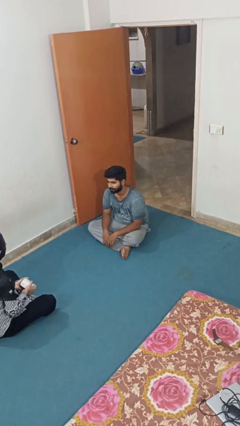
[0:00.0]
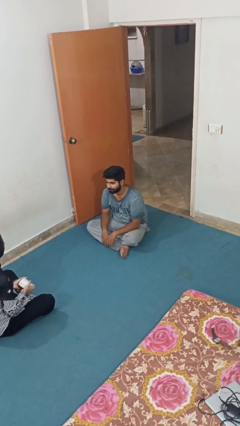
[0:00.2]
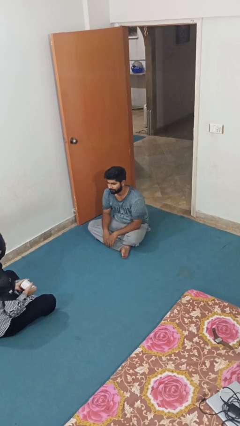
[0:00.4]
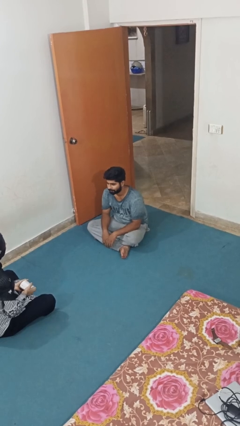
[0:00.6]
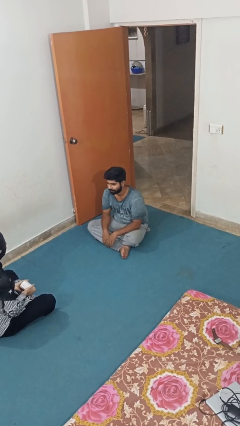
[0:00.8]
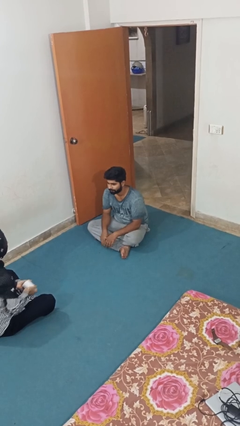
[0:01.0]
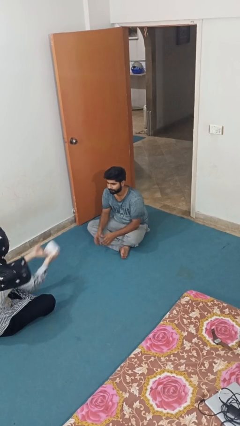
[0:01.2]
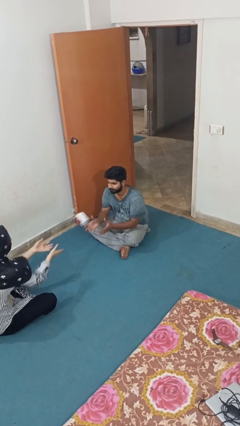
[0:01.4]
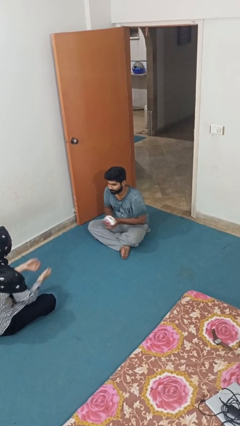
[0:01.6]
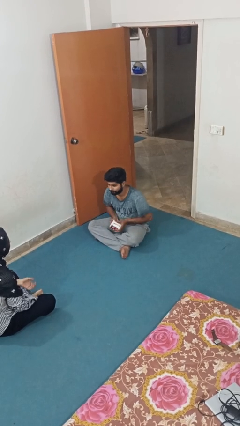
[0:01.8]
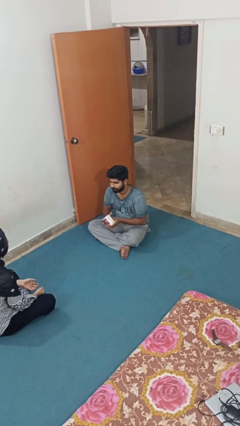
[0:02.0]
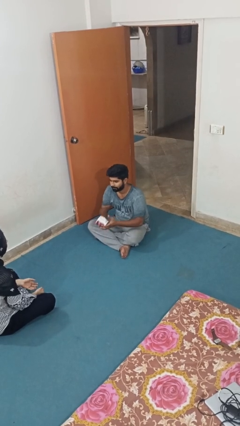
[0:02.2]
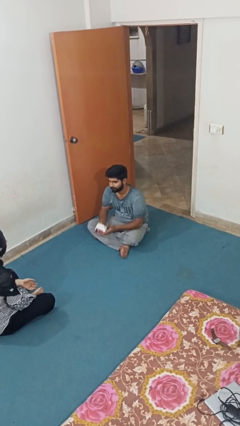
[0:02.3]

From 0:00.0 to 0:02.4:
person catches object from person

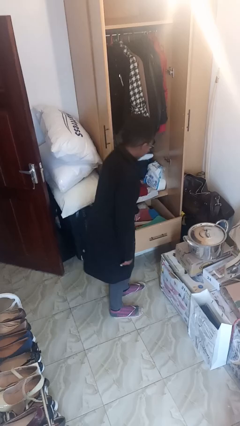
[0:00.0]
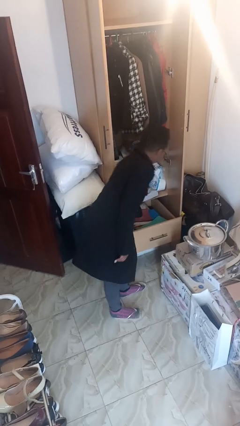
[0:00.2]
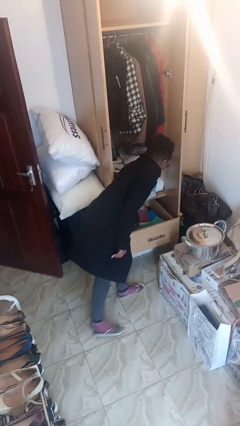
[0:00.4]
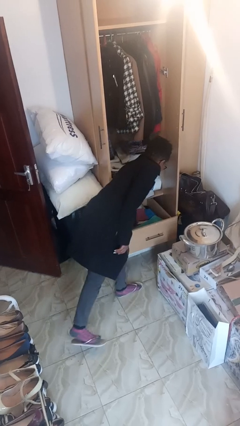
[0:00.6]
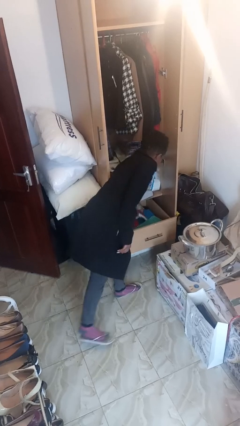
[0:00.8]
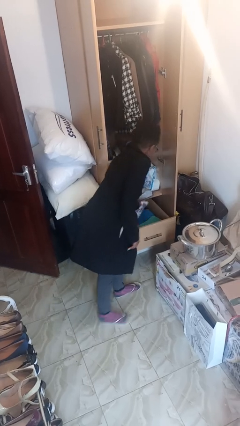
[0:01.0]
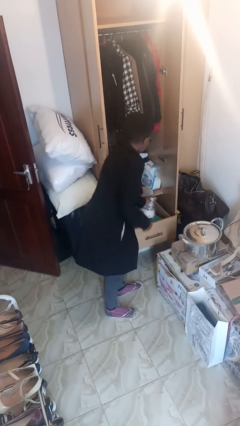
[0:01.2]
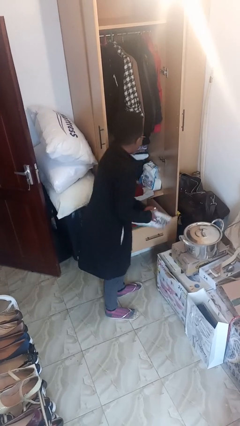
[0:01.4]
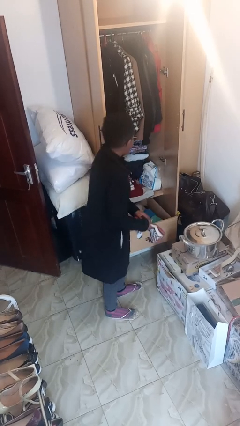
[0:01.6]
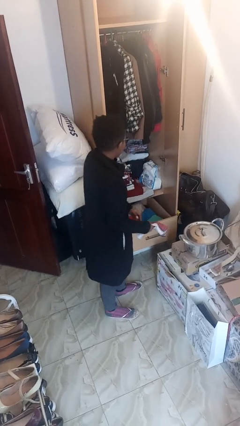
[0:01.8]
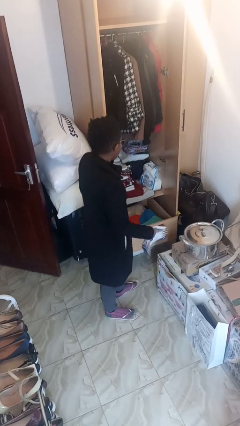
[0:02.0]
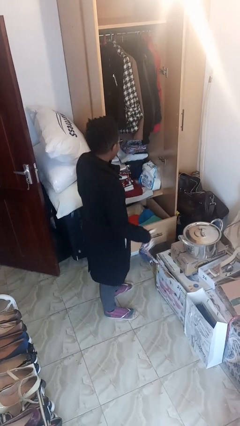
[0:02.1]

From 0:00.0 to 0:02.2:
person takes clothes from dresser

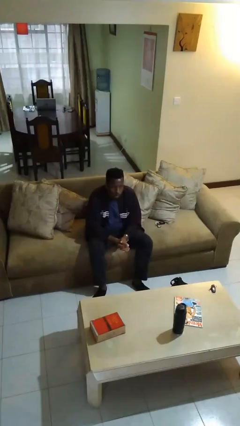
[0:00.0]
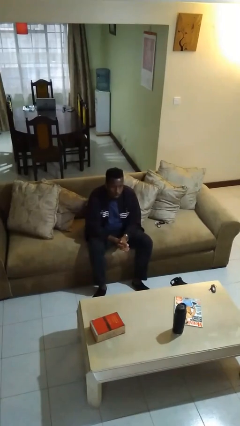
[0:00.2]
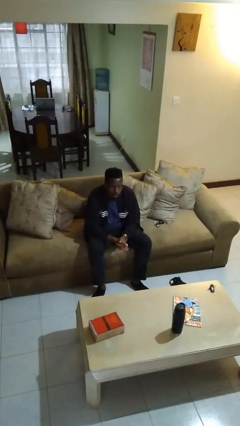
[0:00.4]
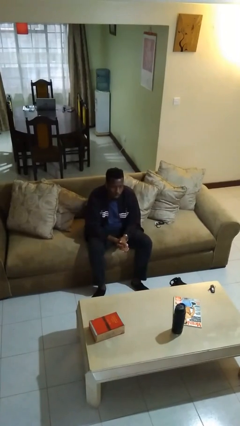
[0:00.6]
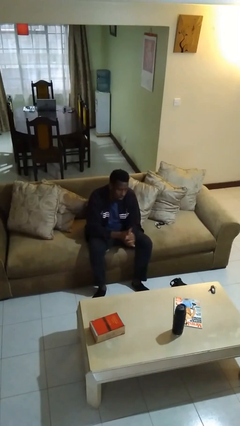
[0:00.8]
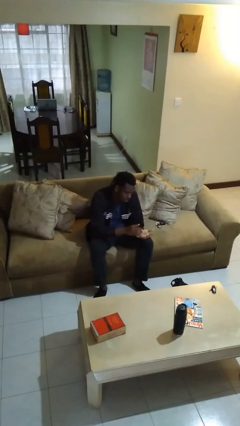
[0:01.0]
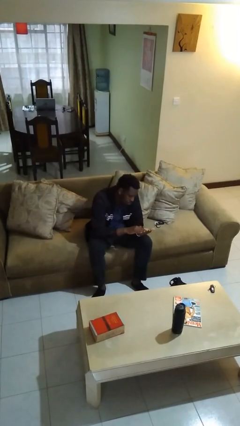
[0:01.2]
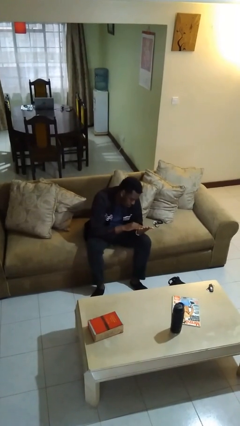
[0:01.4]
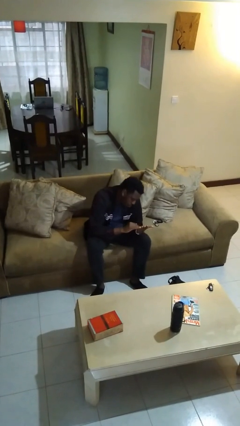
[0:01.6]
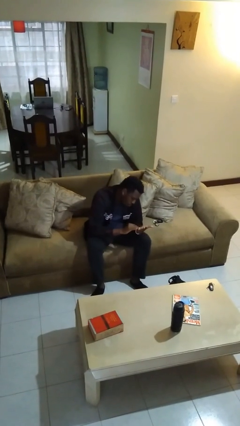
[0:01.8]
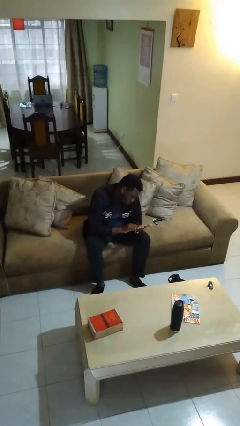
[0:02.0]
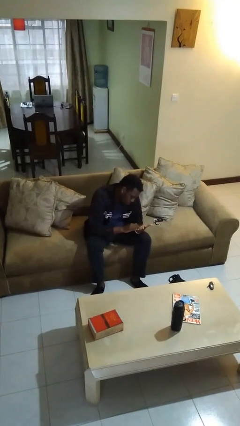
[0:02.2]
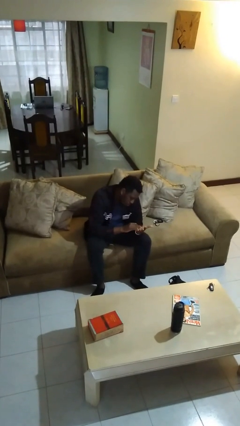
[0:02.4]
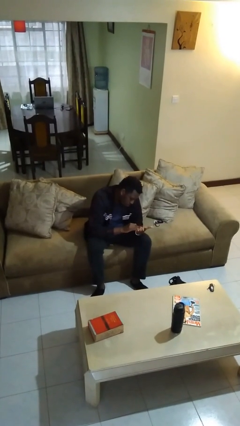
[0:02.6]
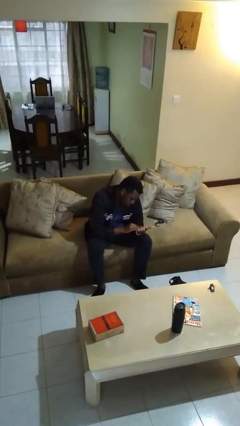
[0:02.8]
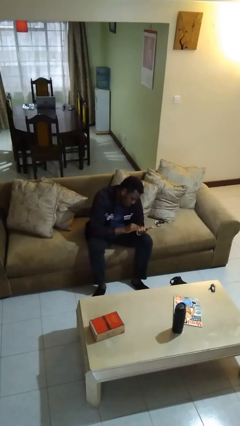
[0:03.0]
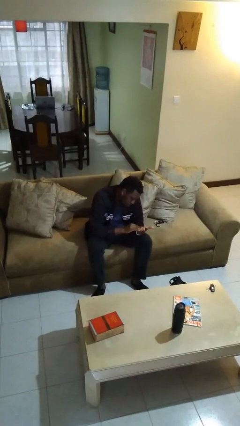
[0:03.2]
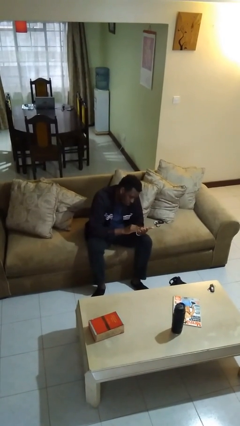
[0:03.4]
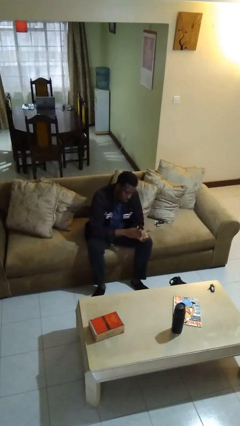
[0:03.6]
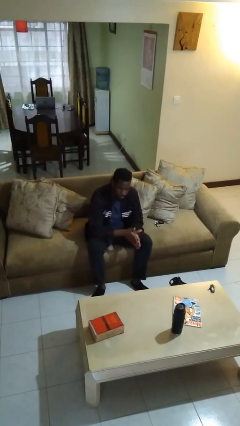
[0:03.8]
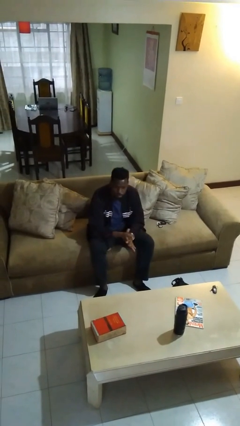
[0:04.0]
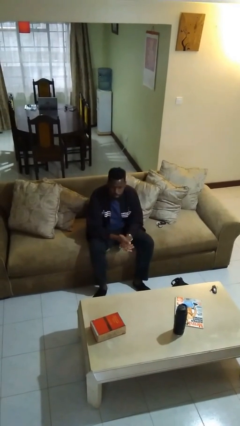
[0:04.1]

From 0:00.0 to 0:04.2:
person looks at hands in lap

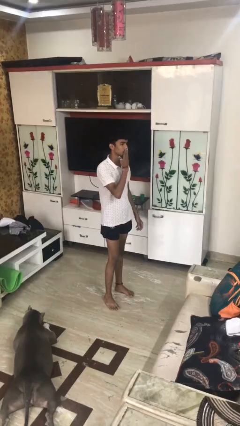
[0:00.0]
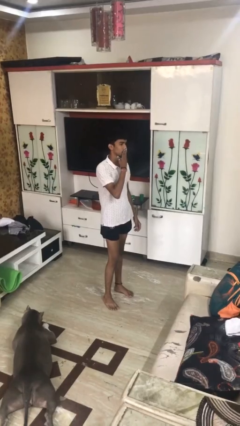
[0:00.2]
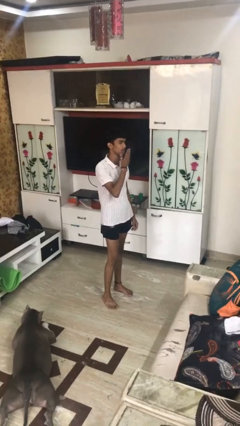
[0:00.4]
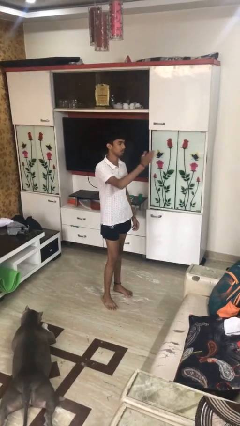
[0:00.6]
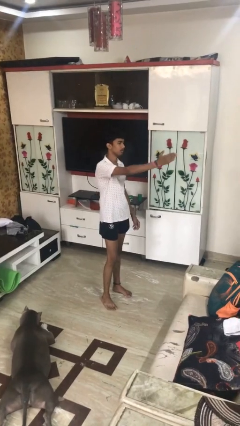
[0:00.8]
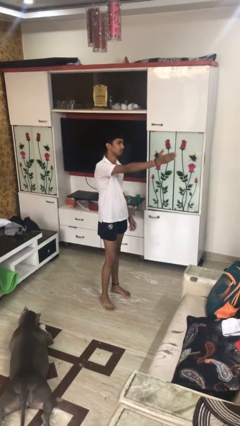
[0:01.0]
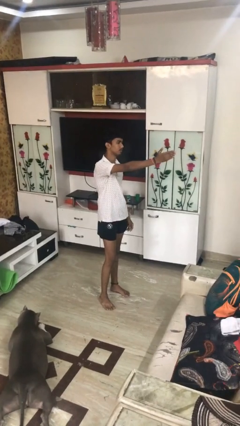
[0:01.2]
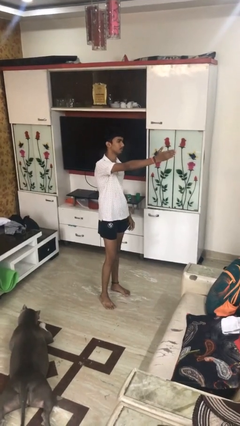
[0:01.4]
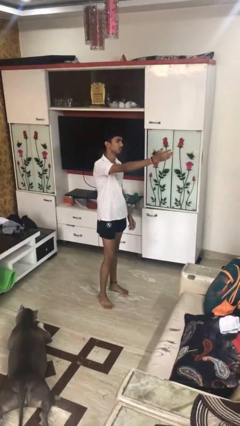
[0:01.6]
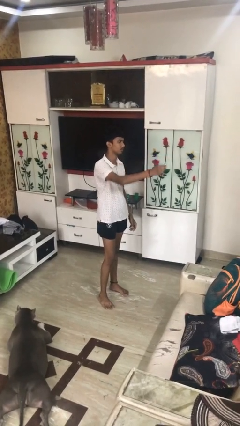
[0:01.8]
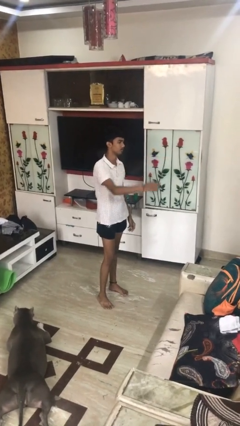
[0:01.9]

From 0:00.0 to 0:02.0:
person gestures blow kiss

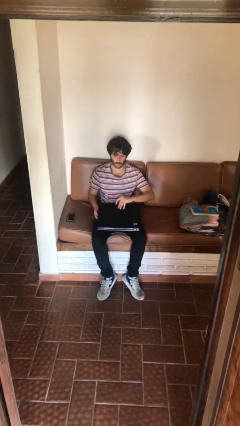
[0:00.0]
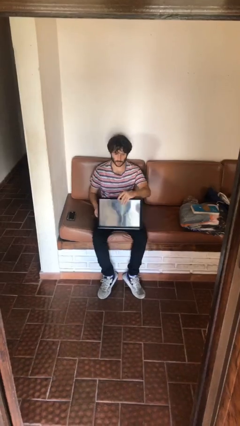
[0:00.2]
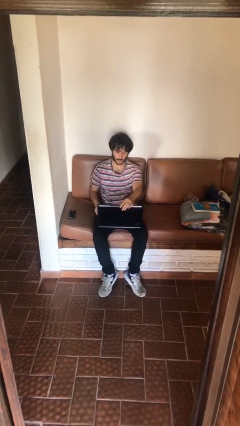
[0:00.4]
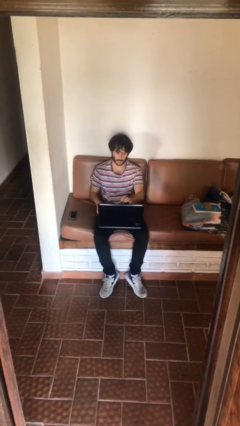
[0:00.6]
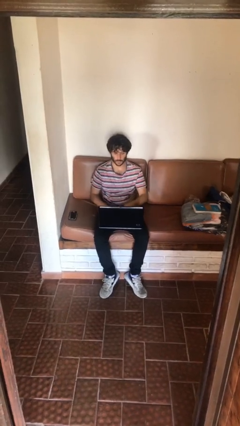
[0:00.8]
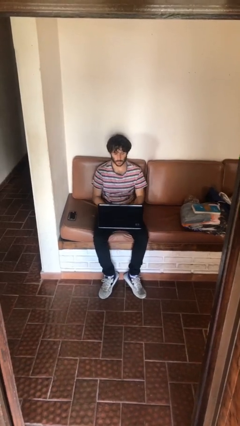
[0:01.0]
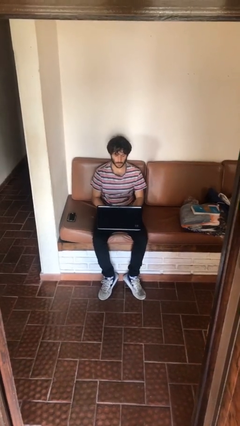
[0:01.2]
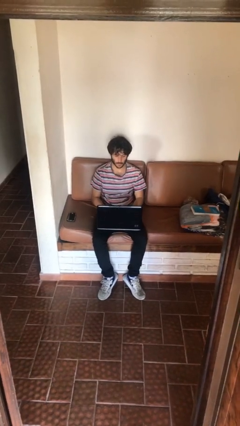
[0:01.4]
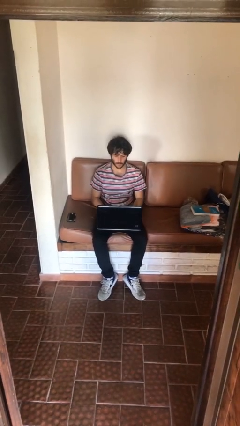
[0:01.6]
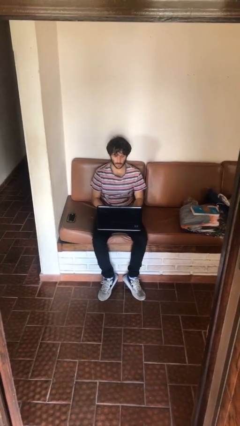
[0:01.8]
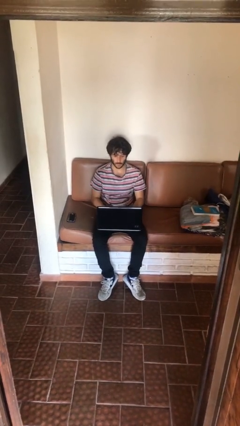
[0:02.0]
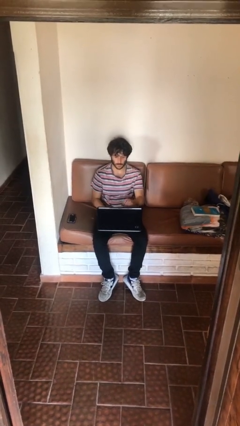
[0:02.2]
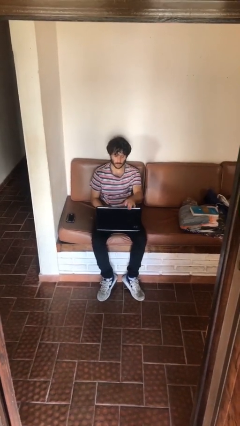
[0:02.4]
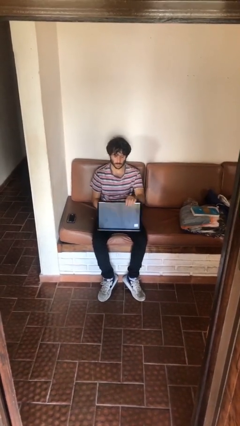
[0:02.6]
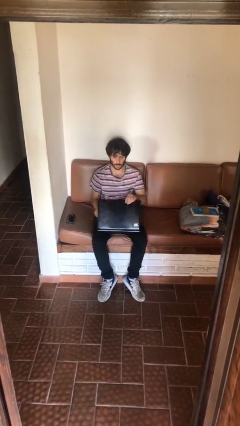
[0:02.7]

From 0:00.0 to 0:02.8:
person interacts with laptop

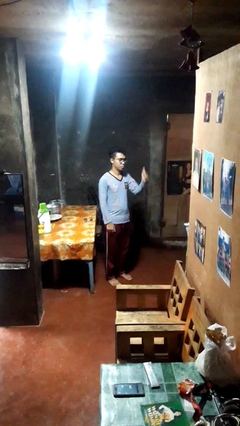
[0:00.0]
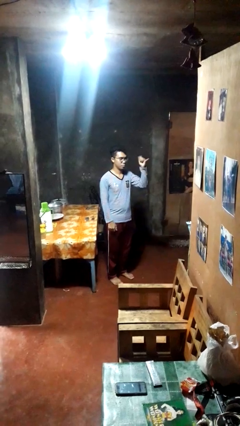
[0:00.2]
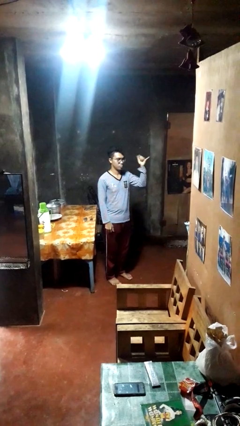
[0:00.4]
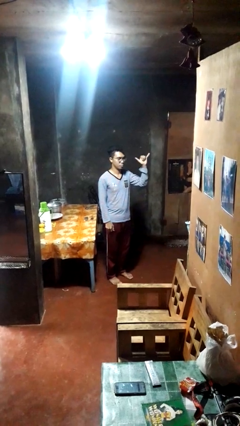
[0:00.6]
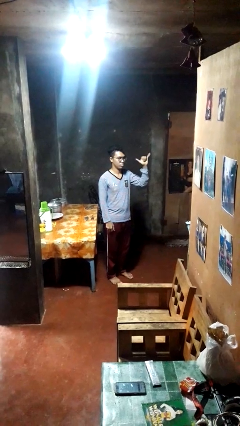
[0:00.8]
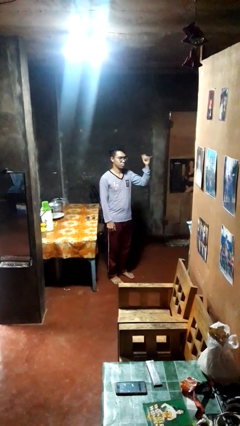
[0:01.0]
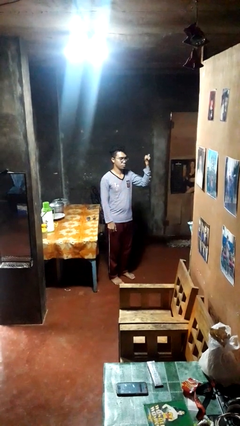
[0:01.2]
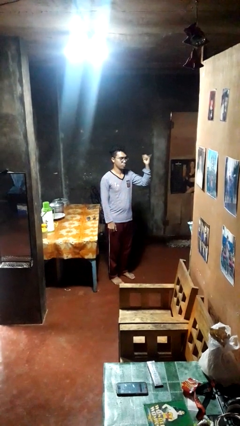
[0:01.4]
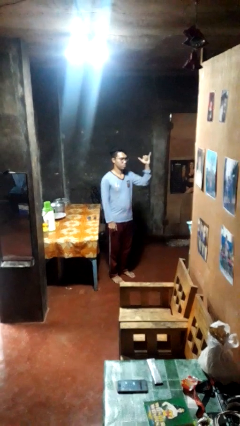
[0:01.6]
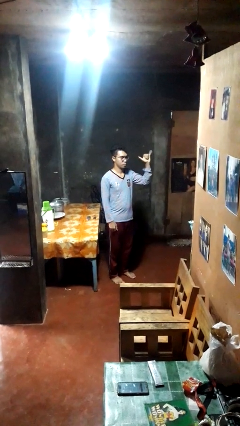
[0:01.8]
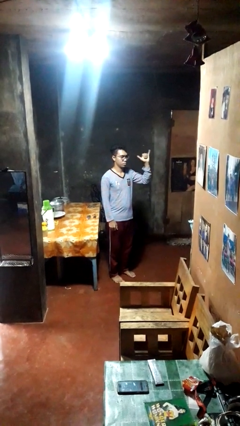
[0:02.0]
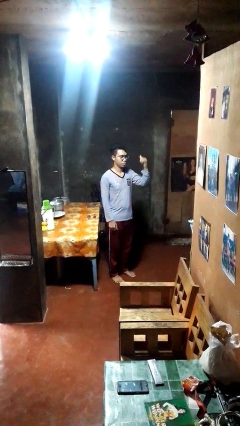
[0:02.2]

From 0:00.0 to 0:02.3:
person gestures hang loose

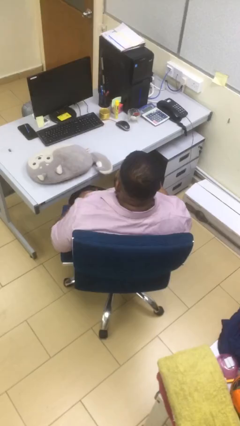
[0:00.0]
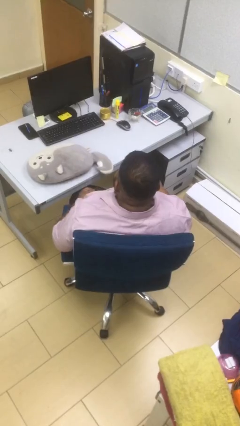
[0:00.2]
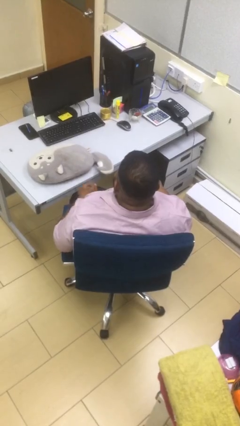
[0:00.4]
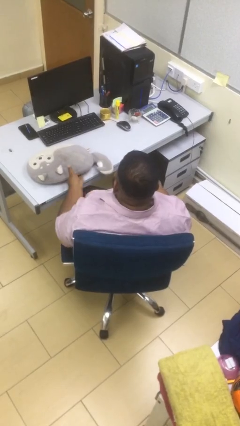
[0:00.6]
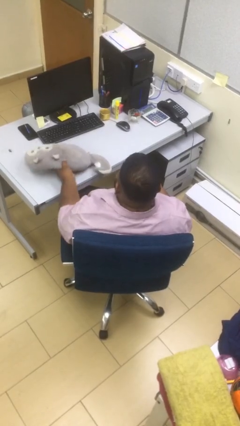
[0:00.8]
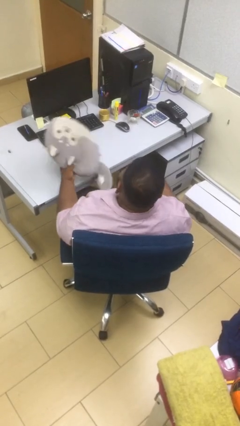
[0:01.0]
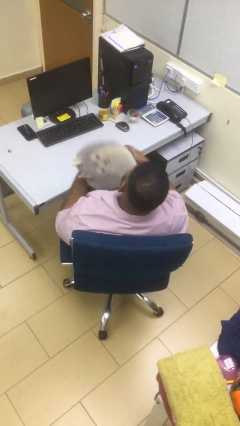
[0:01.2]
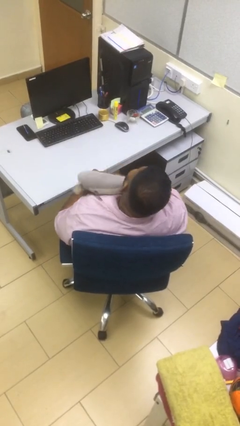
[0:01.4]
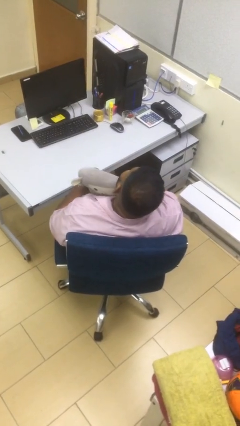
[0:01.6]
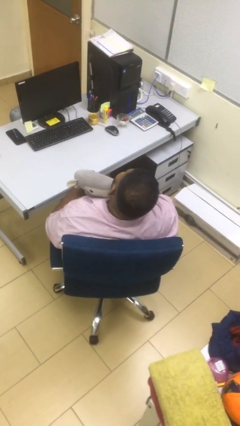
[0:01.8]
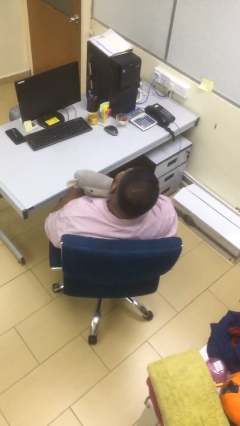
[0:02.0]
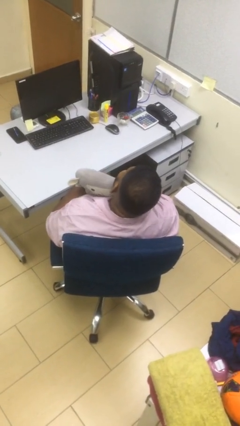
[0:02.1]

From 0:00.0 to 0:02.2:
person hugs stuffed animal
